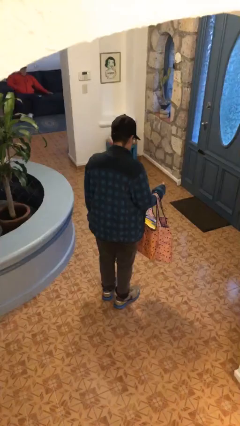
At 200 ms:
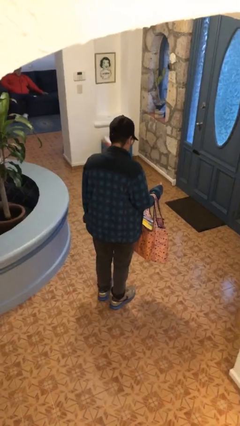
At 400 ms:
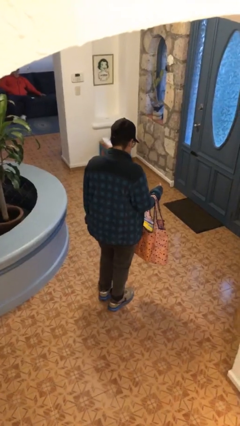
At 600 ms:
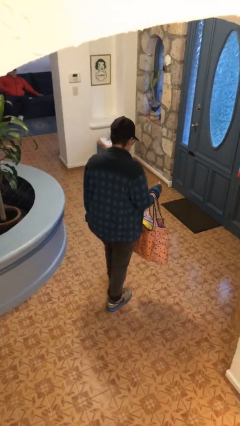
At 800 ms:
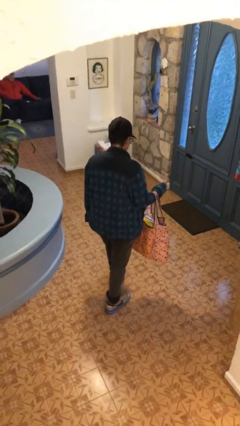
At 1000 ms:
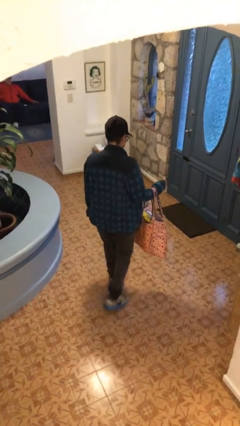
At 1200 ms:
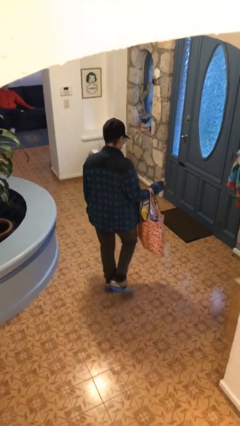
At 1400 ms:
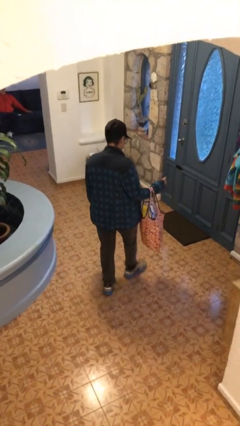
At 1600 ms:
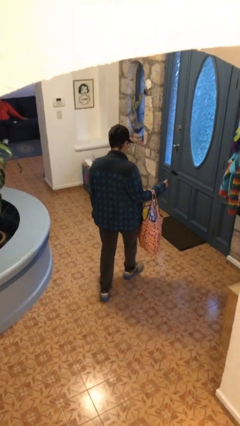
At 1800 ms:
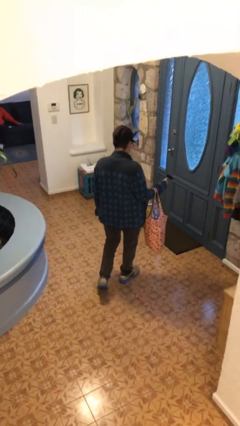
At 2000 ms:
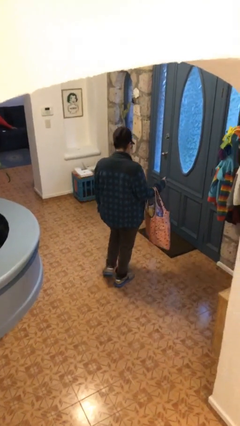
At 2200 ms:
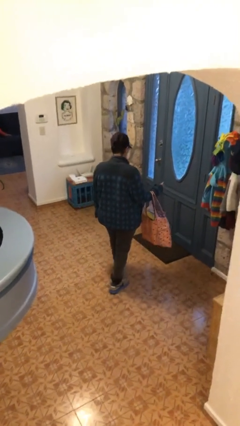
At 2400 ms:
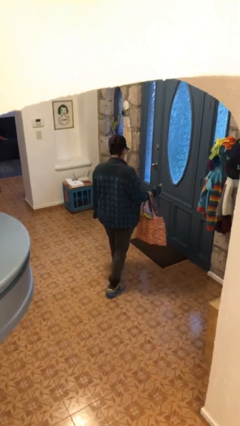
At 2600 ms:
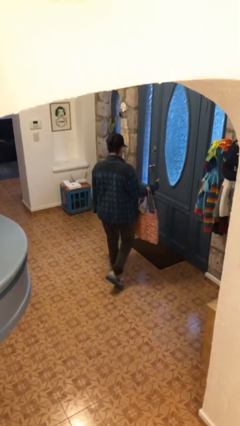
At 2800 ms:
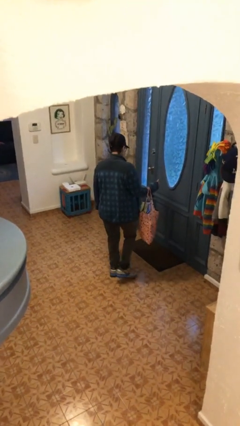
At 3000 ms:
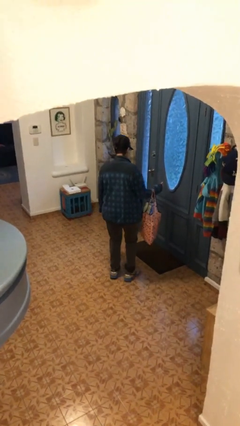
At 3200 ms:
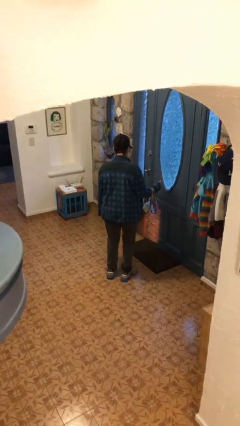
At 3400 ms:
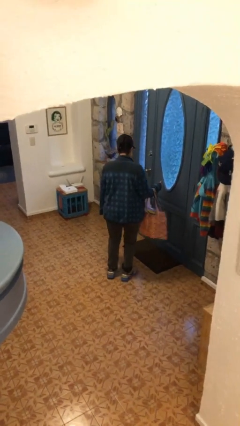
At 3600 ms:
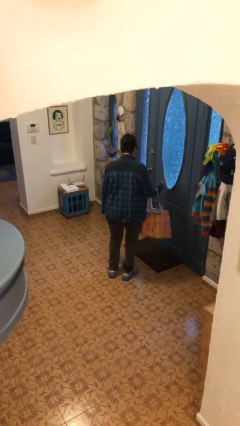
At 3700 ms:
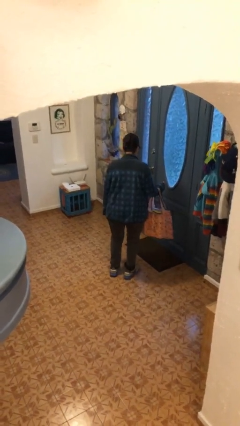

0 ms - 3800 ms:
person carries groceries

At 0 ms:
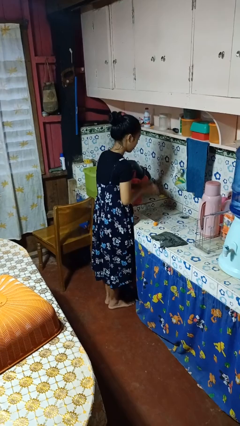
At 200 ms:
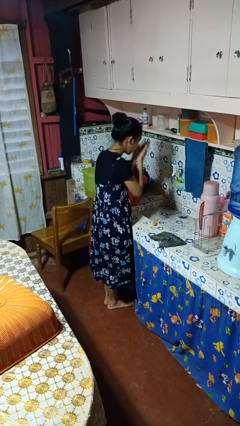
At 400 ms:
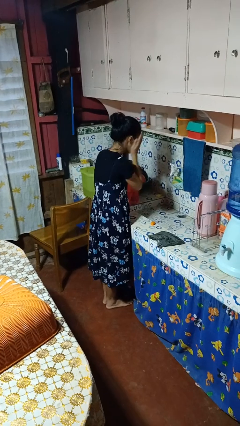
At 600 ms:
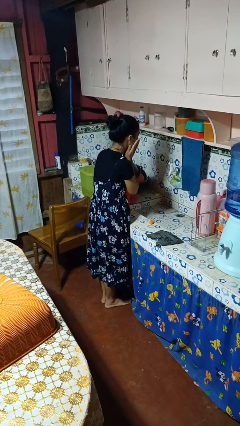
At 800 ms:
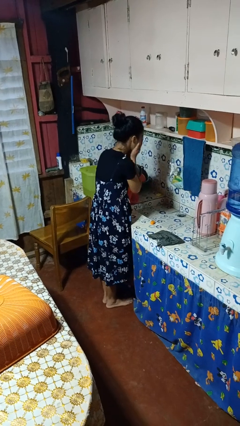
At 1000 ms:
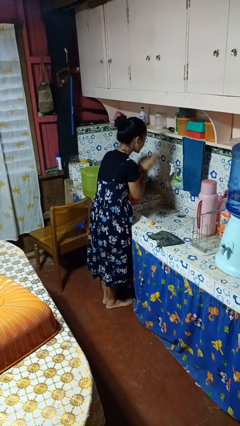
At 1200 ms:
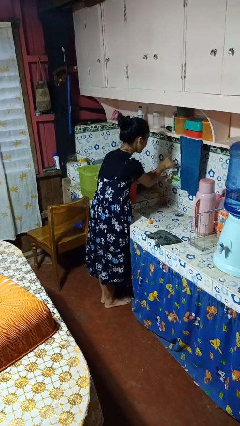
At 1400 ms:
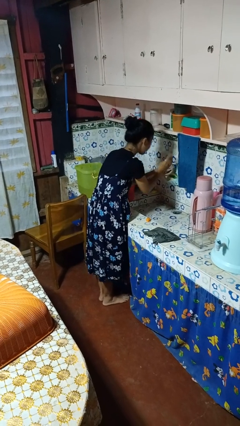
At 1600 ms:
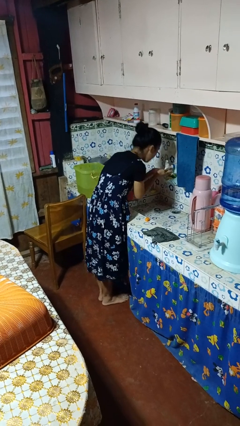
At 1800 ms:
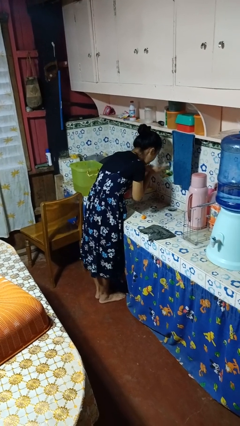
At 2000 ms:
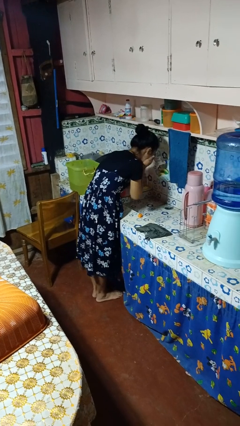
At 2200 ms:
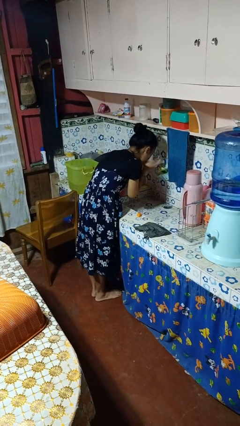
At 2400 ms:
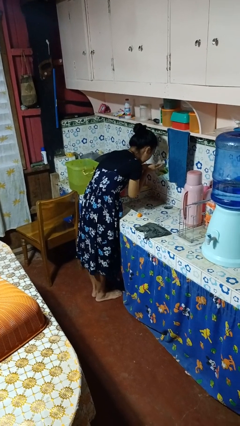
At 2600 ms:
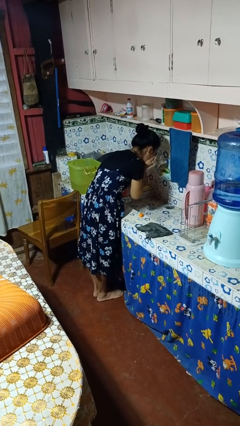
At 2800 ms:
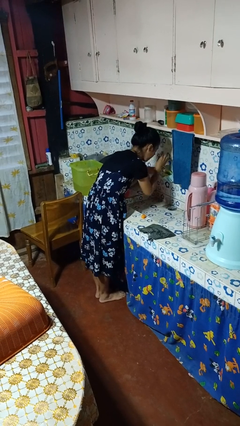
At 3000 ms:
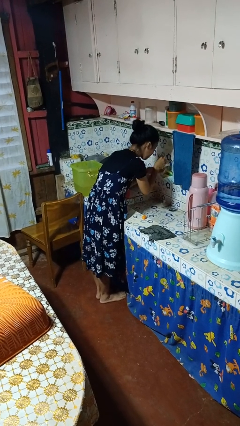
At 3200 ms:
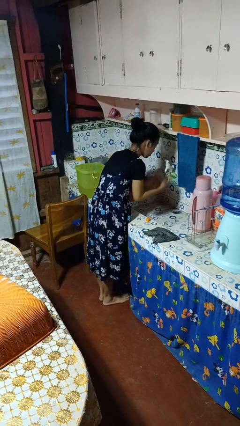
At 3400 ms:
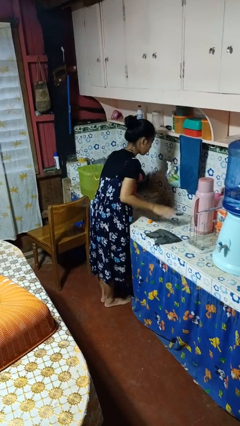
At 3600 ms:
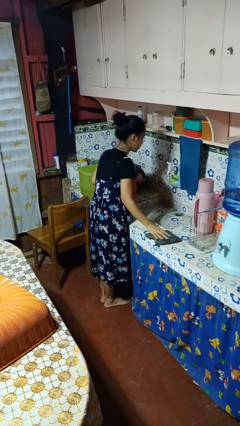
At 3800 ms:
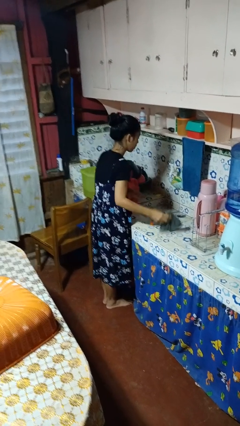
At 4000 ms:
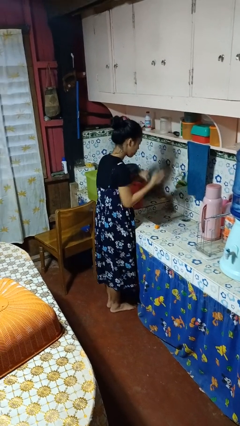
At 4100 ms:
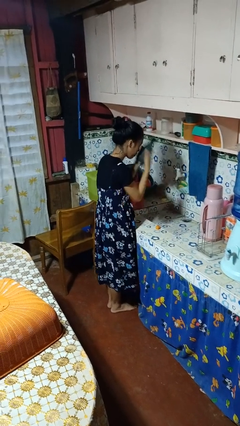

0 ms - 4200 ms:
person washes face

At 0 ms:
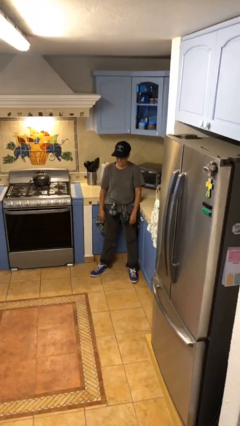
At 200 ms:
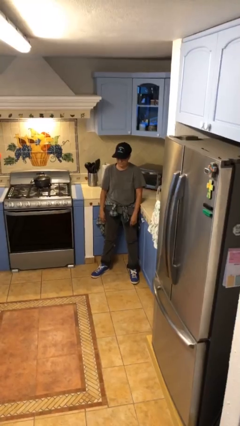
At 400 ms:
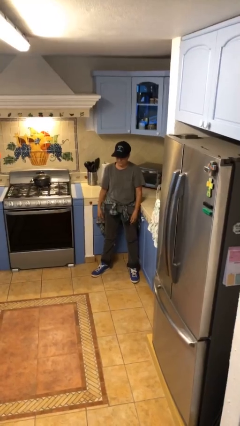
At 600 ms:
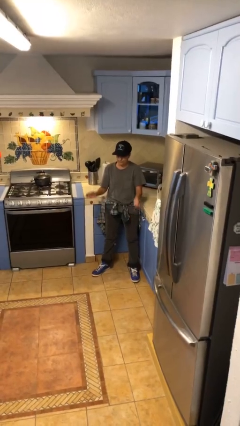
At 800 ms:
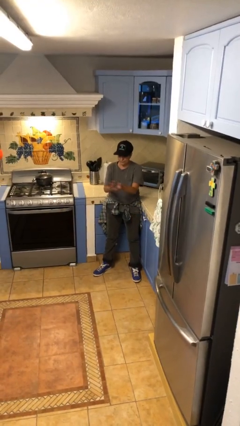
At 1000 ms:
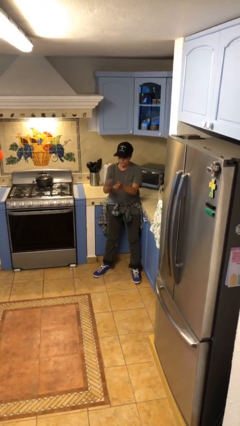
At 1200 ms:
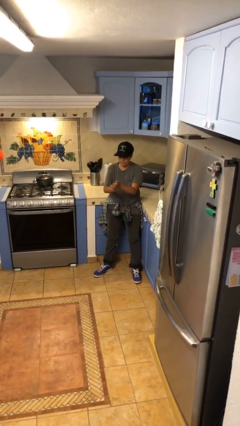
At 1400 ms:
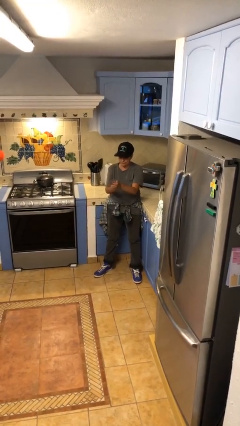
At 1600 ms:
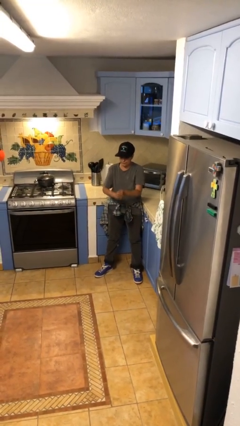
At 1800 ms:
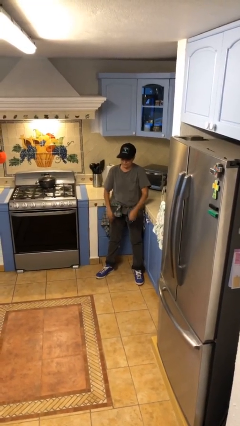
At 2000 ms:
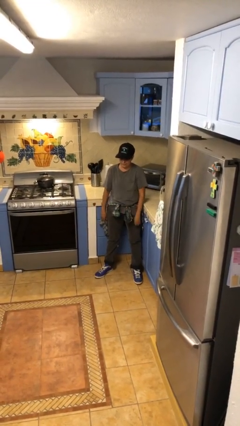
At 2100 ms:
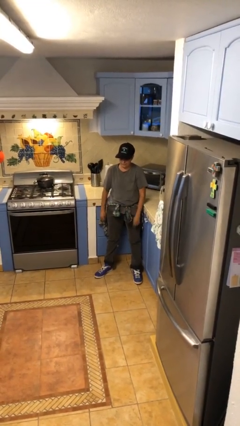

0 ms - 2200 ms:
person claps hands

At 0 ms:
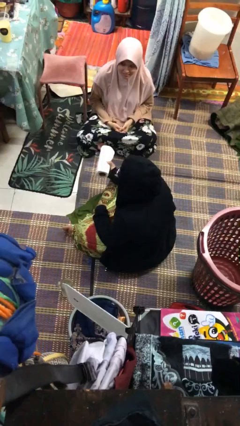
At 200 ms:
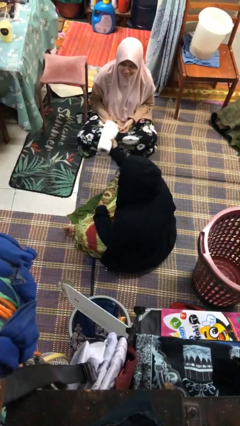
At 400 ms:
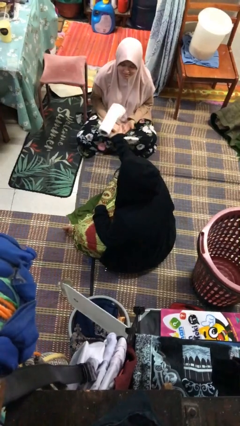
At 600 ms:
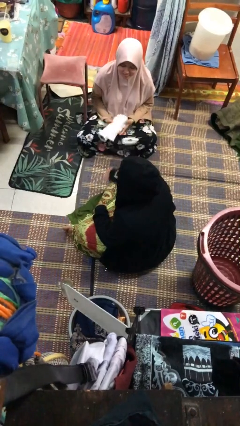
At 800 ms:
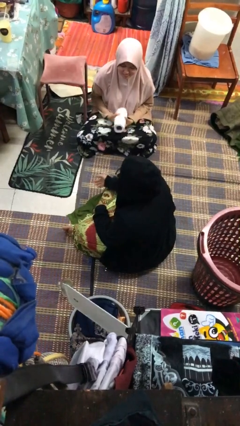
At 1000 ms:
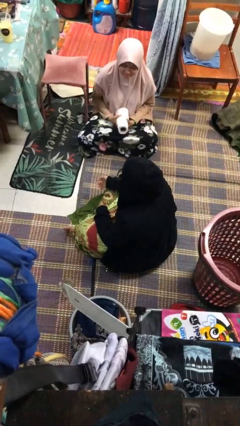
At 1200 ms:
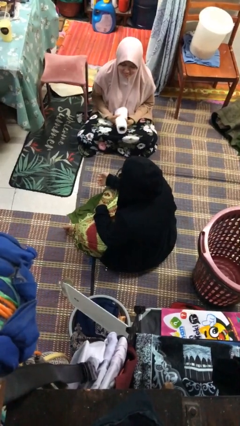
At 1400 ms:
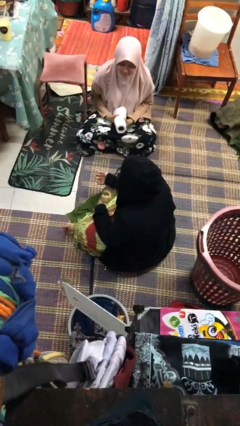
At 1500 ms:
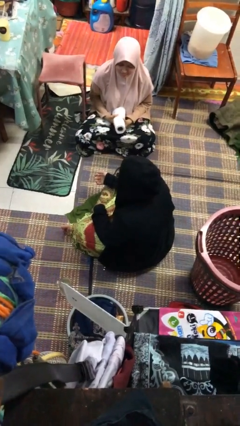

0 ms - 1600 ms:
person throws object to person

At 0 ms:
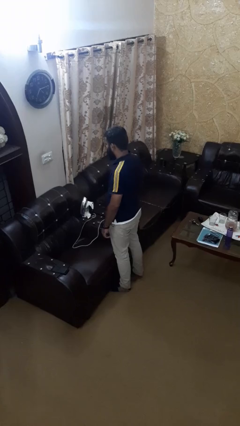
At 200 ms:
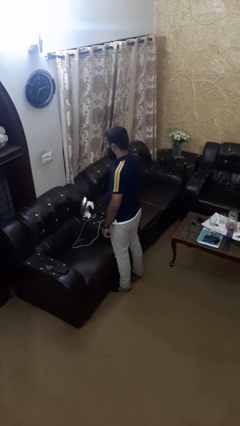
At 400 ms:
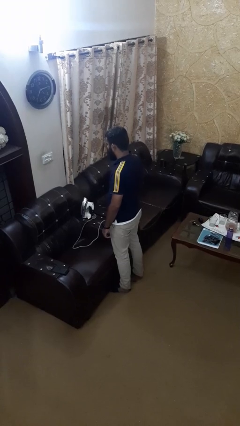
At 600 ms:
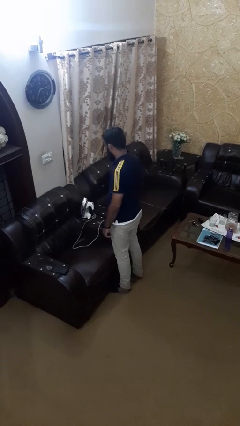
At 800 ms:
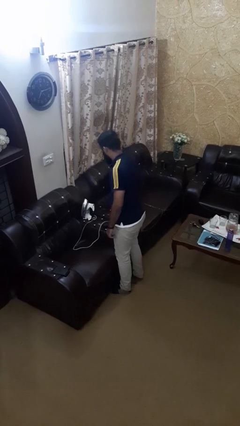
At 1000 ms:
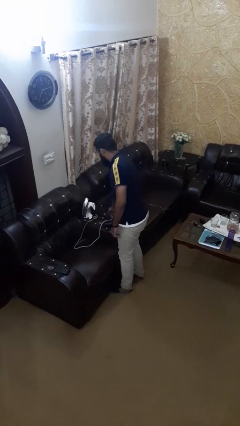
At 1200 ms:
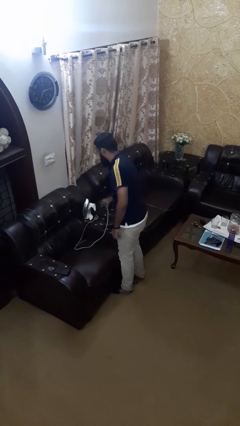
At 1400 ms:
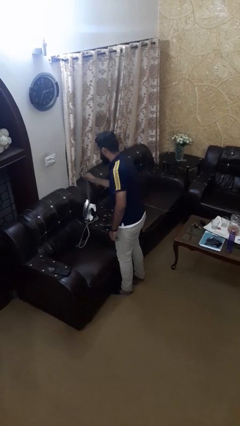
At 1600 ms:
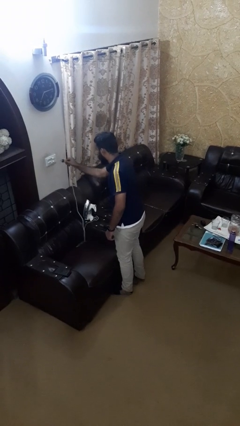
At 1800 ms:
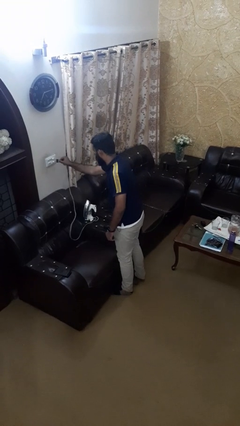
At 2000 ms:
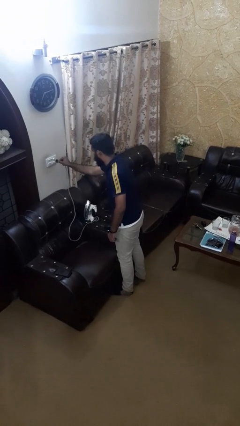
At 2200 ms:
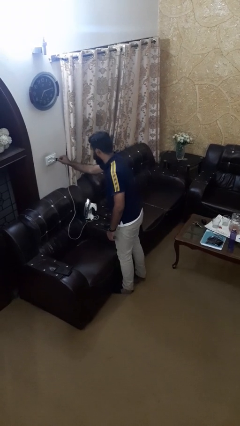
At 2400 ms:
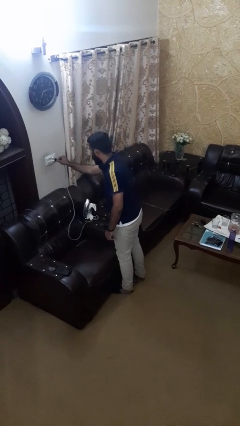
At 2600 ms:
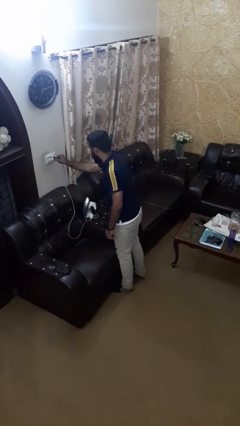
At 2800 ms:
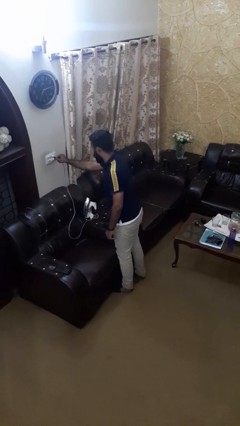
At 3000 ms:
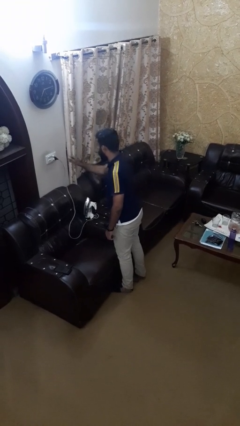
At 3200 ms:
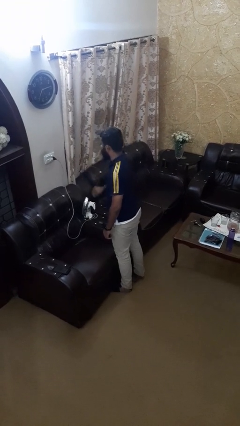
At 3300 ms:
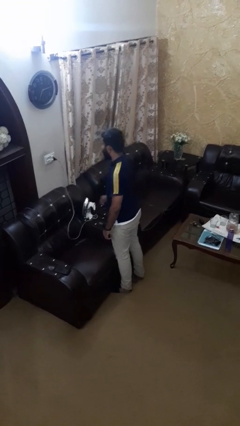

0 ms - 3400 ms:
person plugs into electrical socket

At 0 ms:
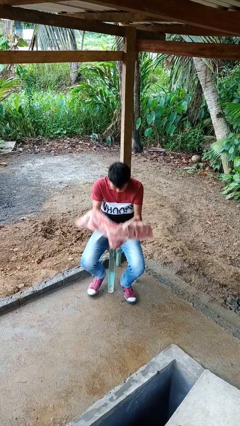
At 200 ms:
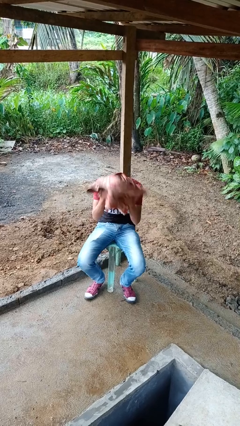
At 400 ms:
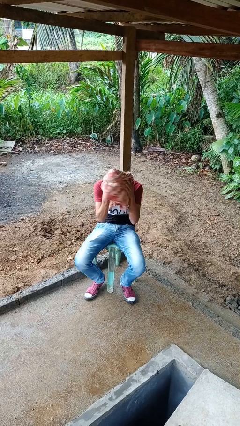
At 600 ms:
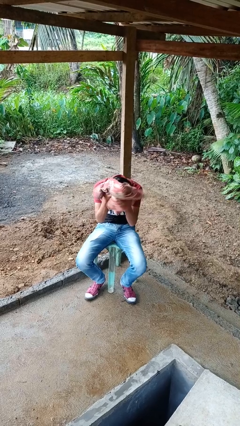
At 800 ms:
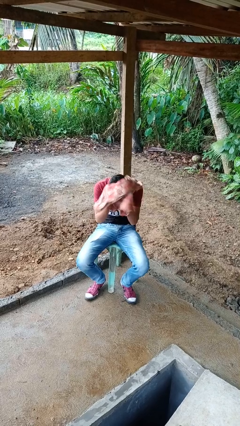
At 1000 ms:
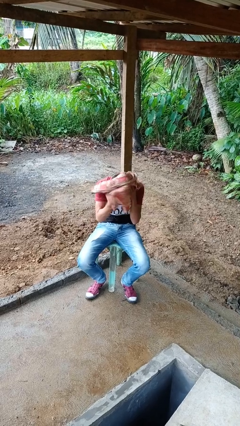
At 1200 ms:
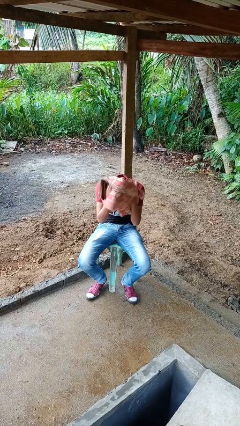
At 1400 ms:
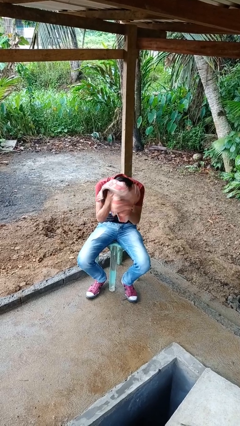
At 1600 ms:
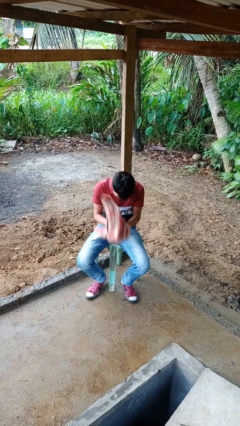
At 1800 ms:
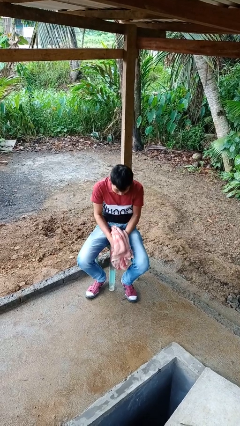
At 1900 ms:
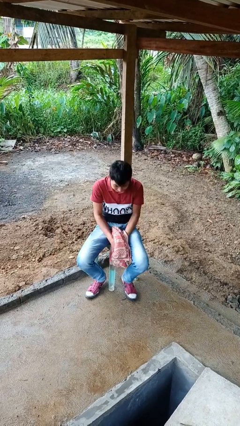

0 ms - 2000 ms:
person dries hair with towel
